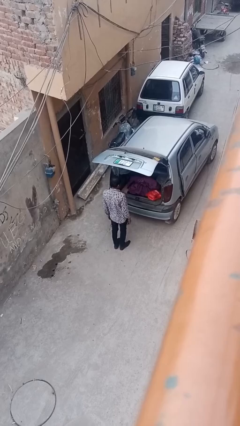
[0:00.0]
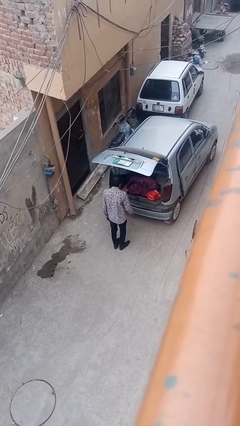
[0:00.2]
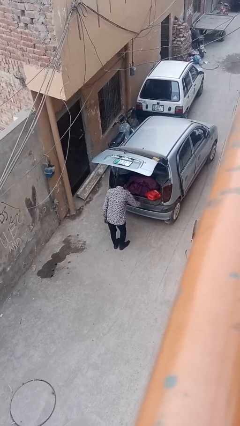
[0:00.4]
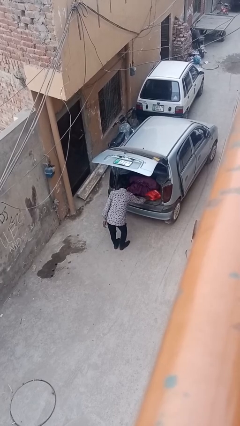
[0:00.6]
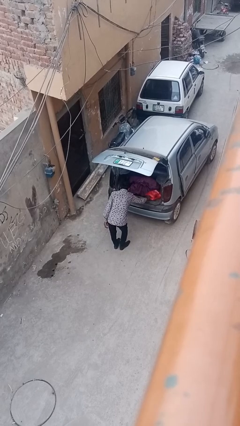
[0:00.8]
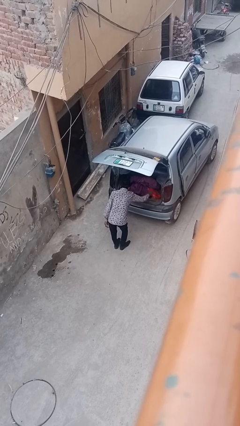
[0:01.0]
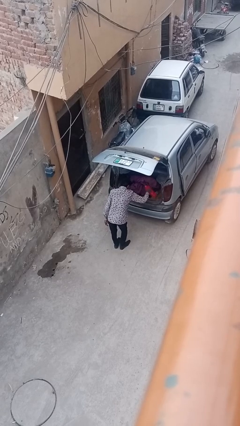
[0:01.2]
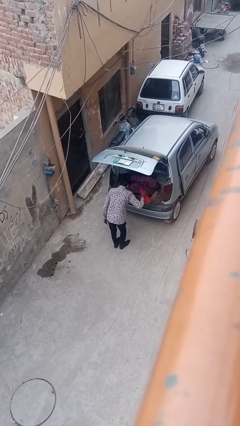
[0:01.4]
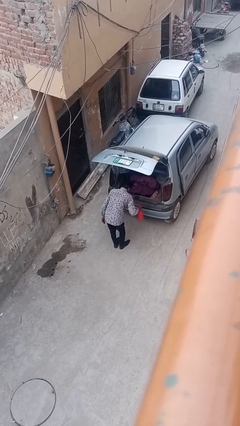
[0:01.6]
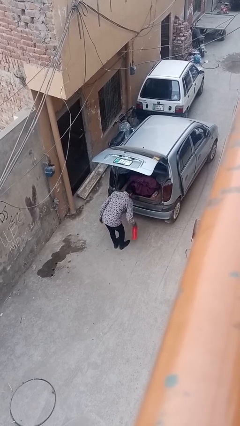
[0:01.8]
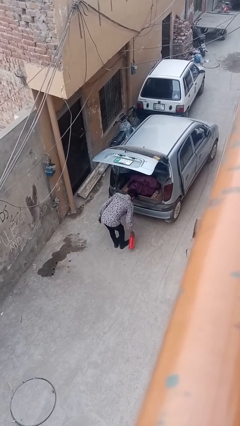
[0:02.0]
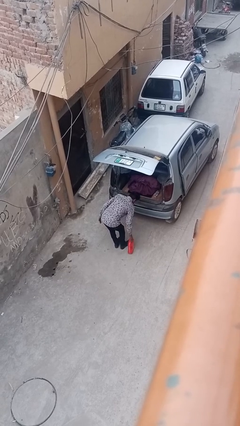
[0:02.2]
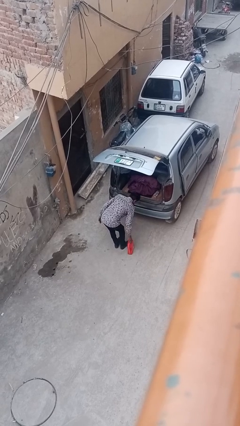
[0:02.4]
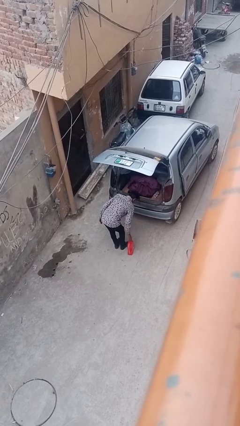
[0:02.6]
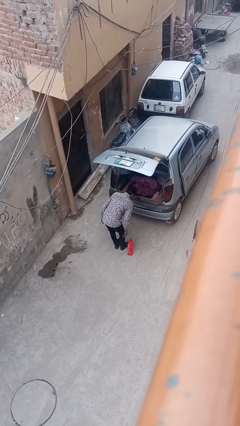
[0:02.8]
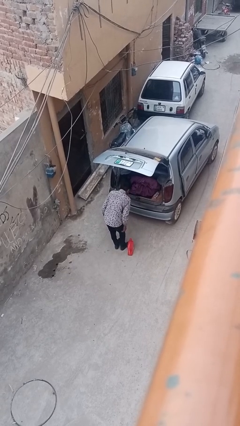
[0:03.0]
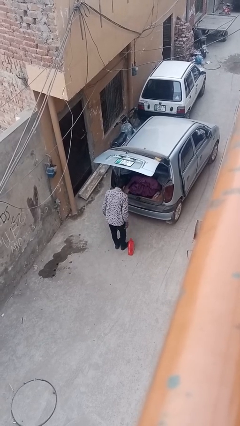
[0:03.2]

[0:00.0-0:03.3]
person unloads car

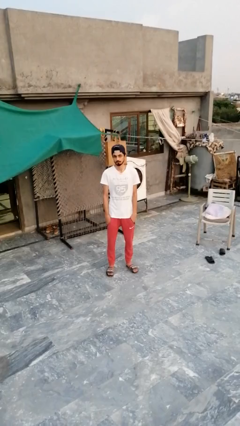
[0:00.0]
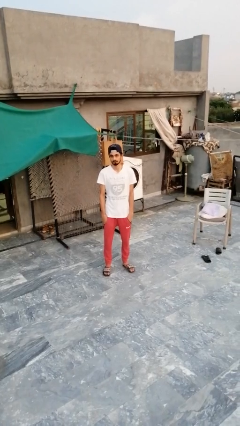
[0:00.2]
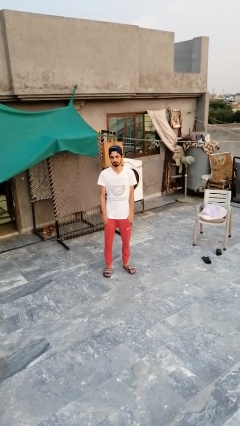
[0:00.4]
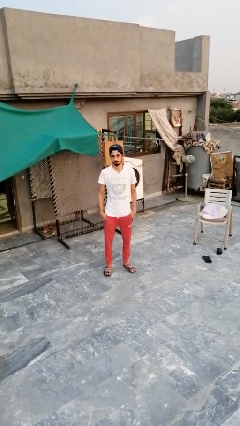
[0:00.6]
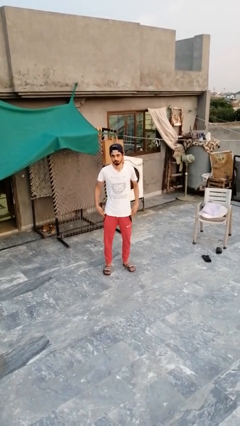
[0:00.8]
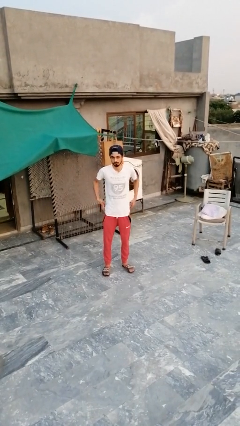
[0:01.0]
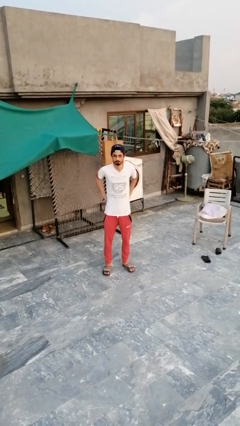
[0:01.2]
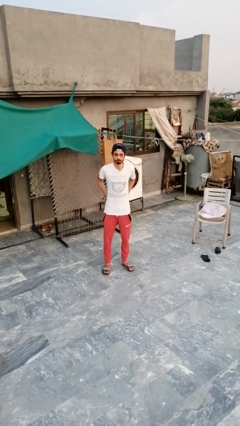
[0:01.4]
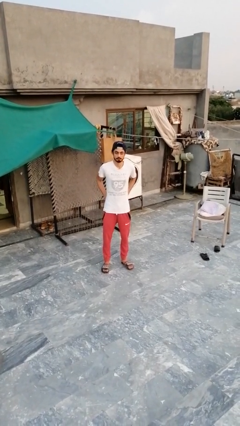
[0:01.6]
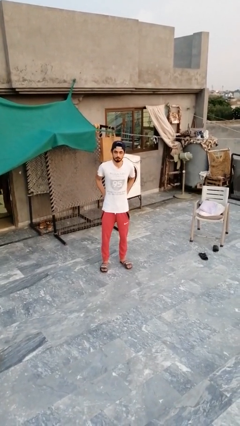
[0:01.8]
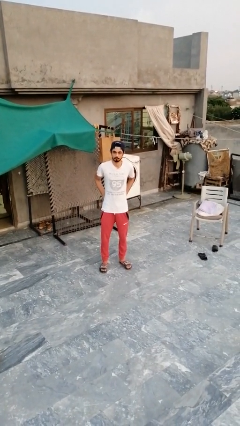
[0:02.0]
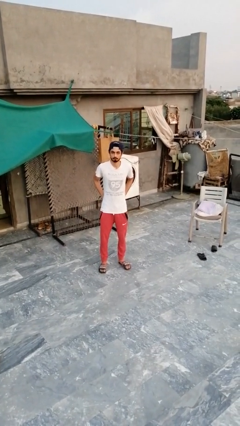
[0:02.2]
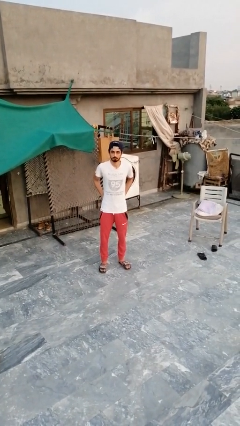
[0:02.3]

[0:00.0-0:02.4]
person puts hands in back pockets

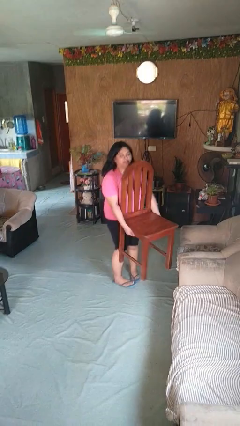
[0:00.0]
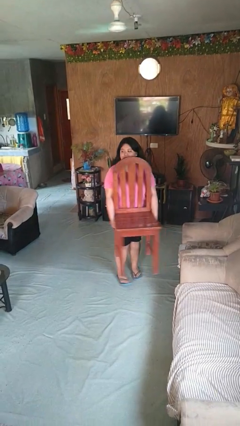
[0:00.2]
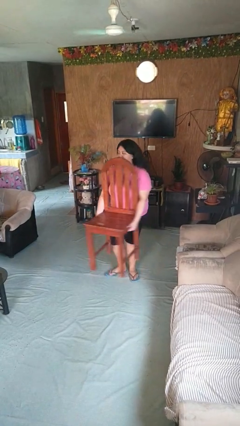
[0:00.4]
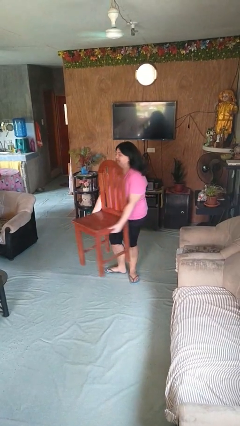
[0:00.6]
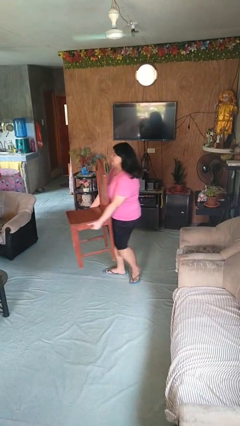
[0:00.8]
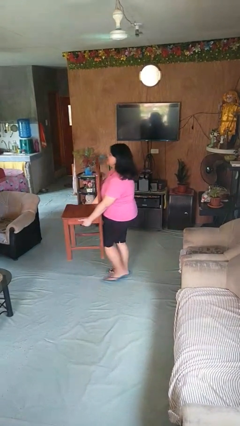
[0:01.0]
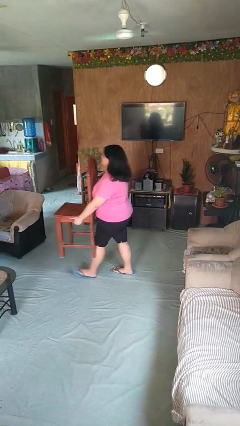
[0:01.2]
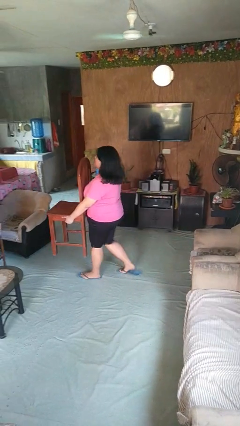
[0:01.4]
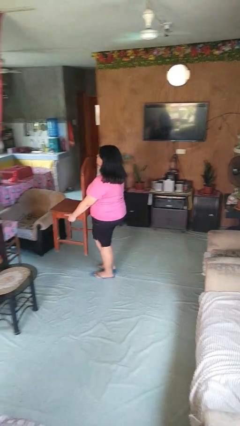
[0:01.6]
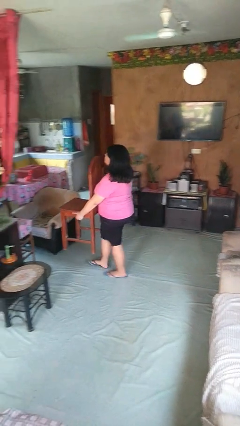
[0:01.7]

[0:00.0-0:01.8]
person carries furniture

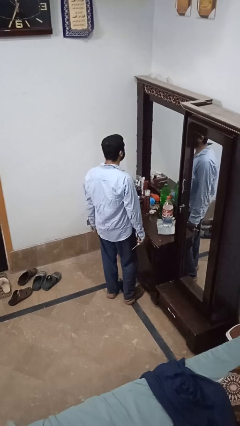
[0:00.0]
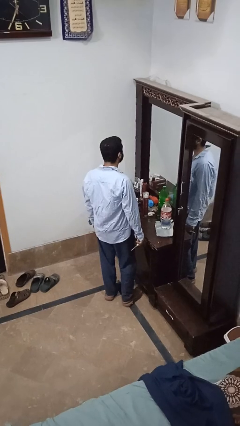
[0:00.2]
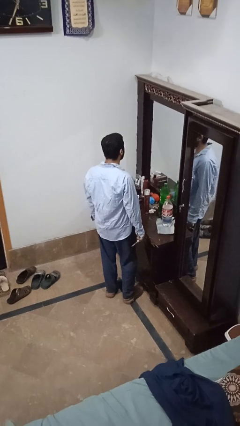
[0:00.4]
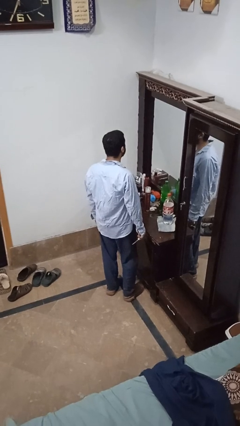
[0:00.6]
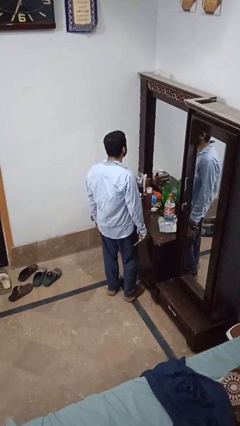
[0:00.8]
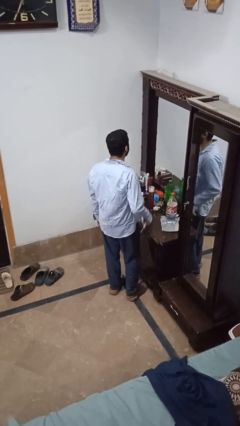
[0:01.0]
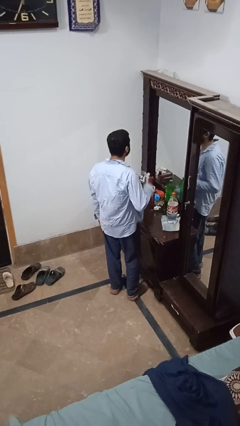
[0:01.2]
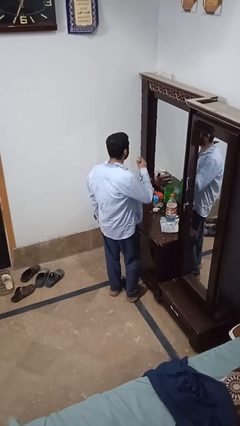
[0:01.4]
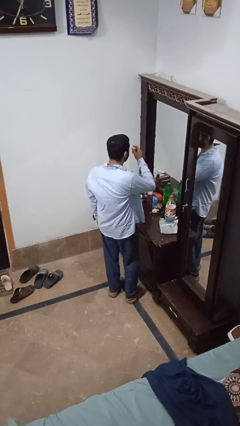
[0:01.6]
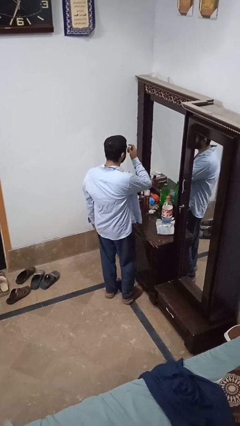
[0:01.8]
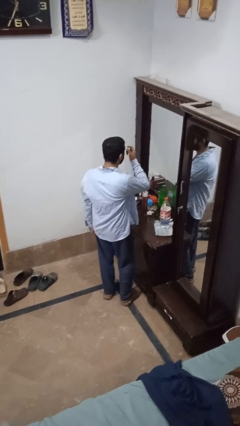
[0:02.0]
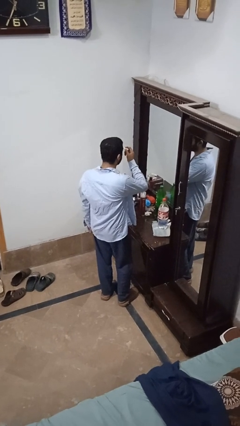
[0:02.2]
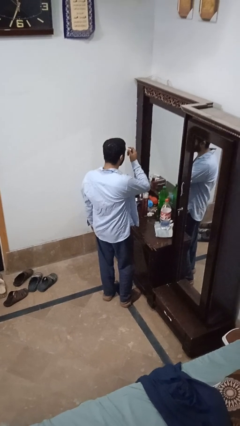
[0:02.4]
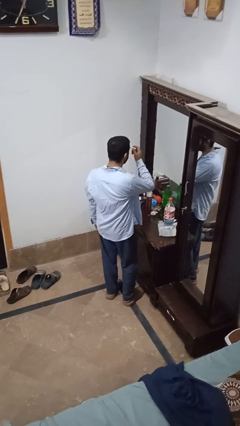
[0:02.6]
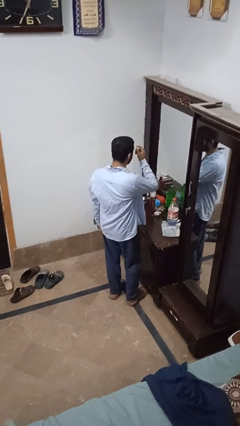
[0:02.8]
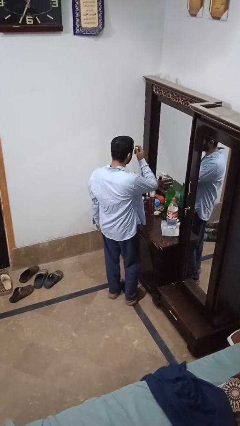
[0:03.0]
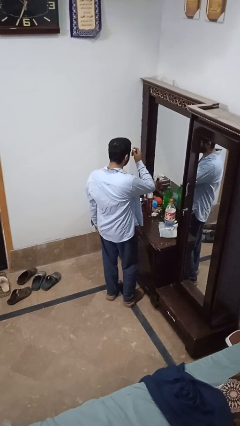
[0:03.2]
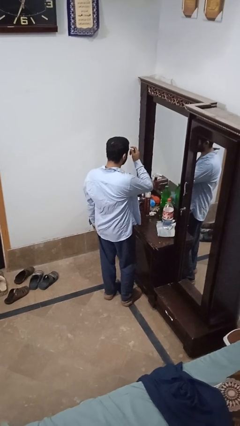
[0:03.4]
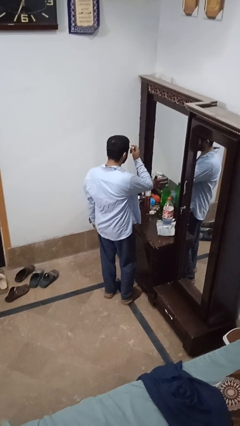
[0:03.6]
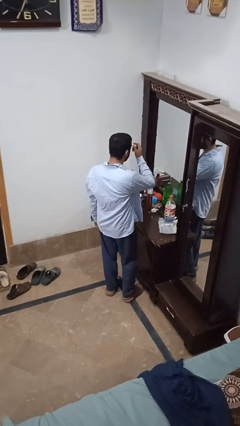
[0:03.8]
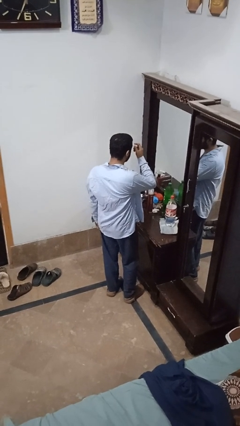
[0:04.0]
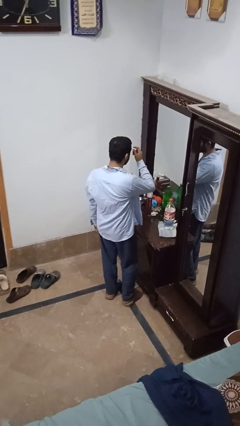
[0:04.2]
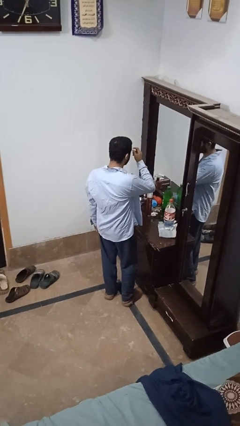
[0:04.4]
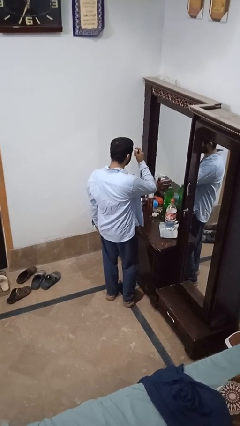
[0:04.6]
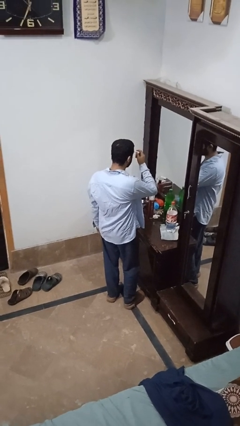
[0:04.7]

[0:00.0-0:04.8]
person applies eye makeup

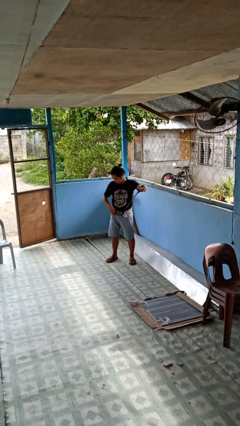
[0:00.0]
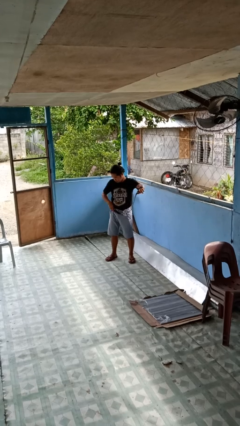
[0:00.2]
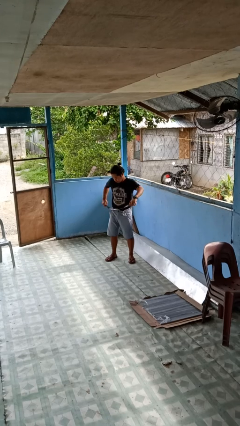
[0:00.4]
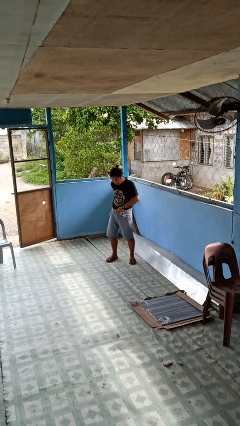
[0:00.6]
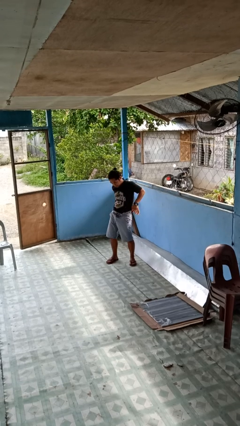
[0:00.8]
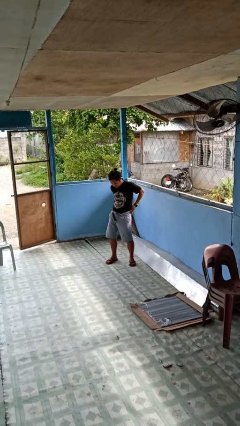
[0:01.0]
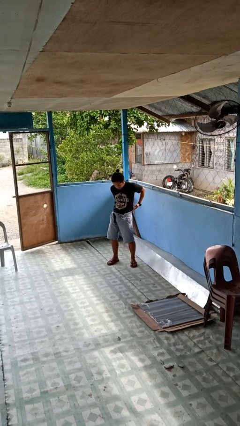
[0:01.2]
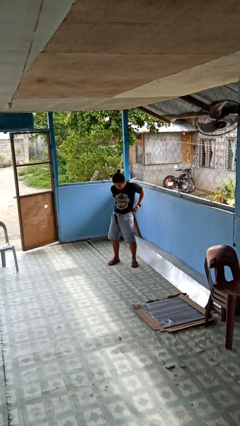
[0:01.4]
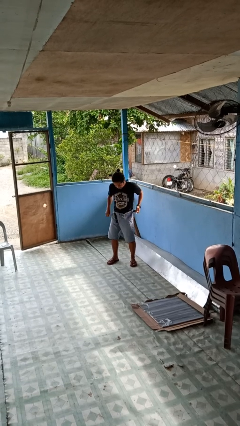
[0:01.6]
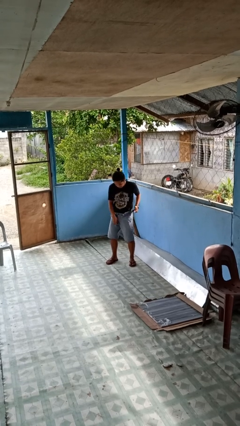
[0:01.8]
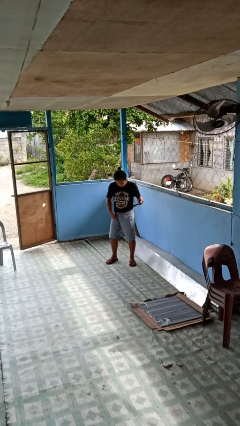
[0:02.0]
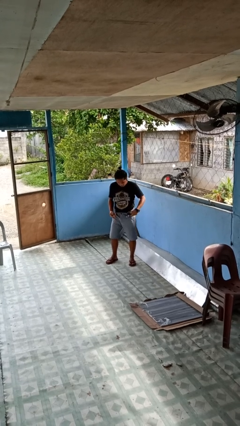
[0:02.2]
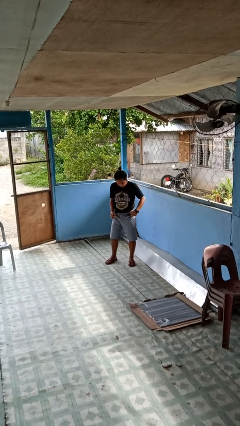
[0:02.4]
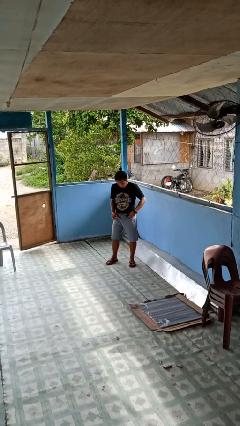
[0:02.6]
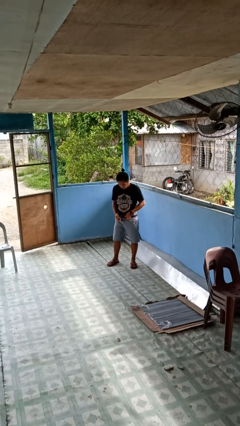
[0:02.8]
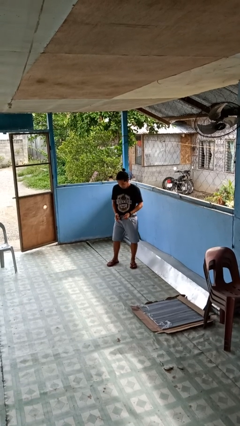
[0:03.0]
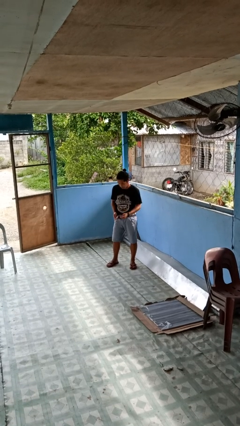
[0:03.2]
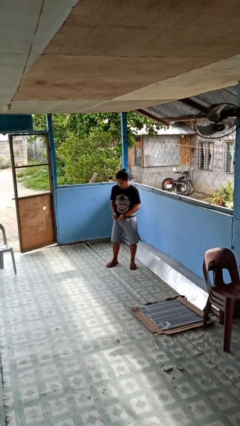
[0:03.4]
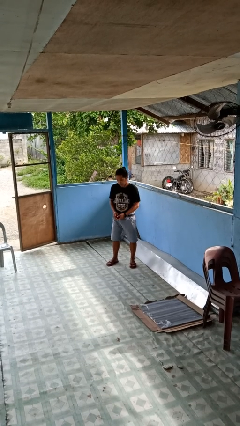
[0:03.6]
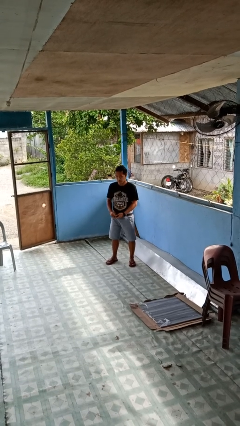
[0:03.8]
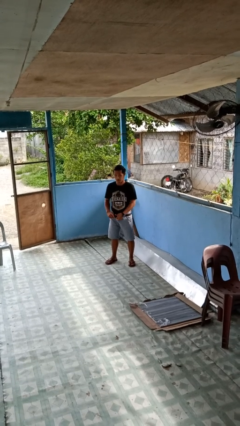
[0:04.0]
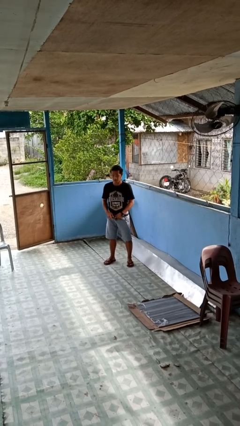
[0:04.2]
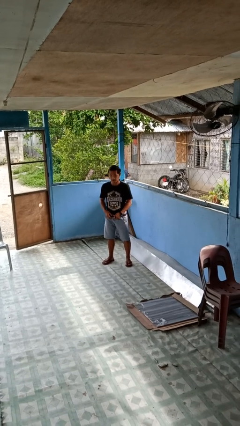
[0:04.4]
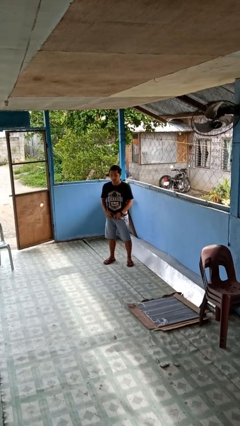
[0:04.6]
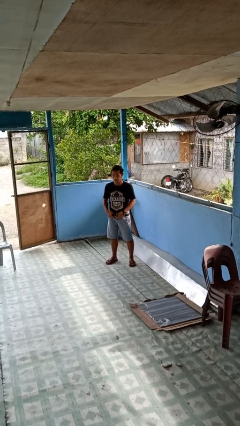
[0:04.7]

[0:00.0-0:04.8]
person puts on belt

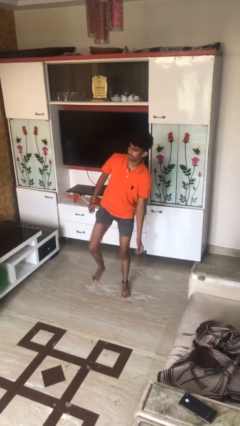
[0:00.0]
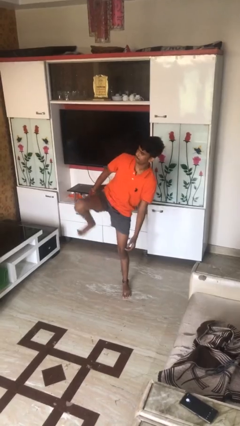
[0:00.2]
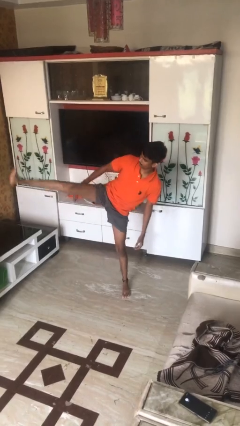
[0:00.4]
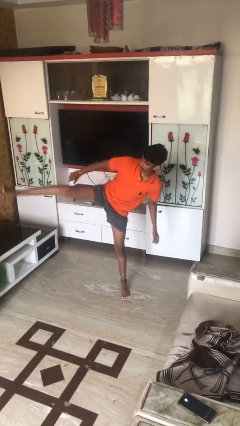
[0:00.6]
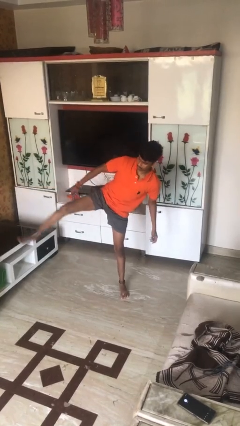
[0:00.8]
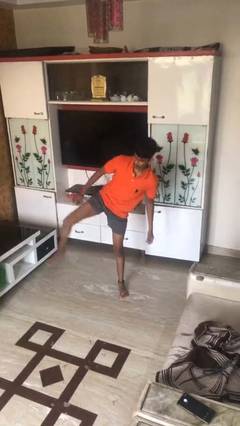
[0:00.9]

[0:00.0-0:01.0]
person karate kicks
